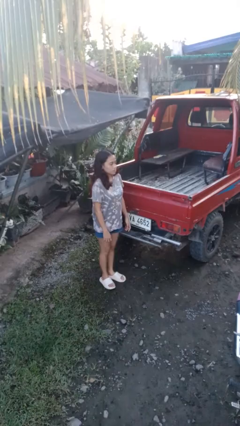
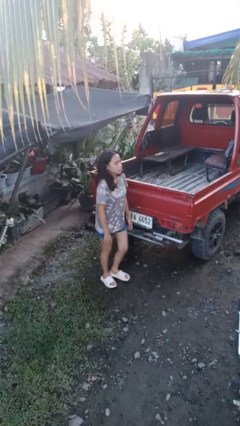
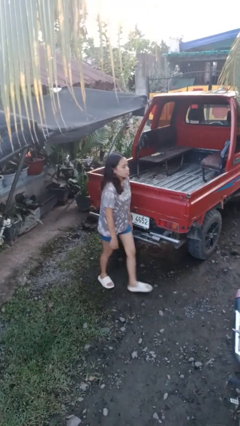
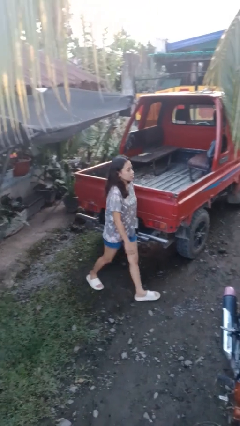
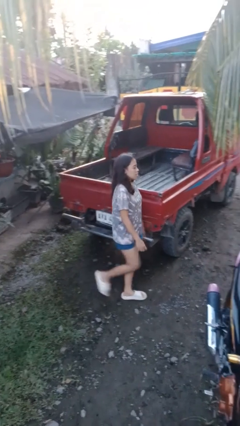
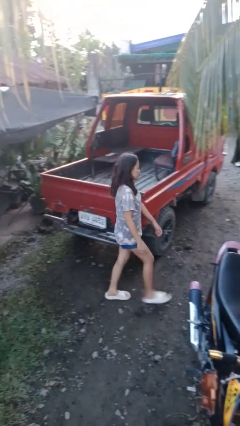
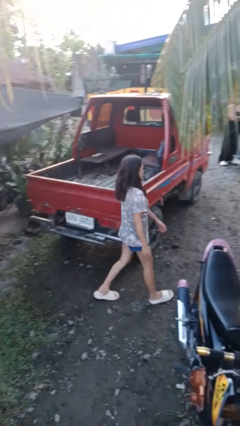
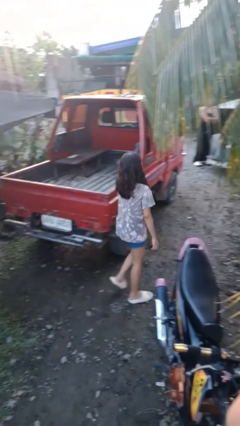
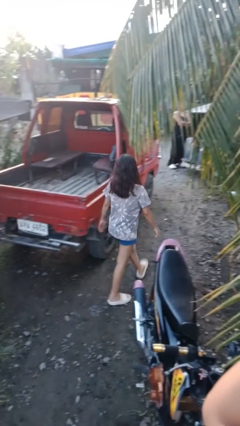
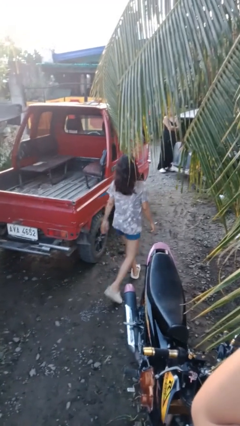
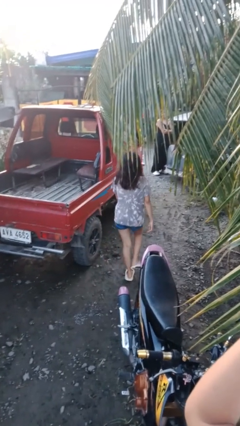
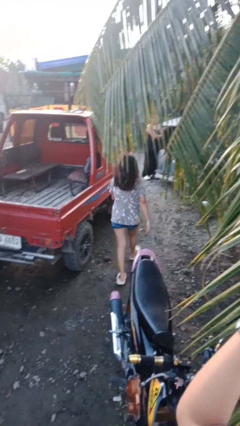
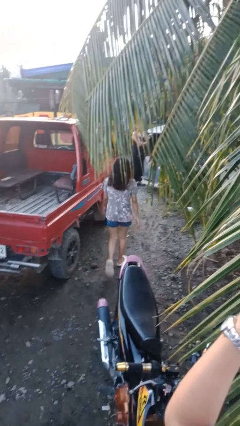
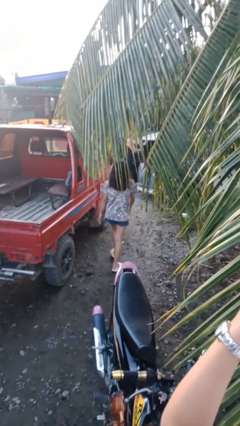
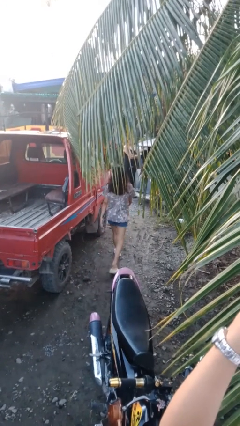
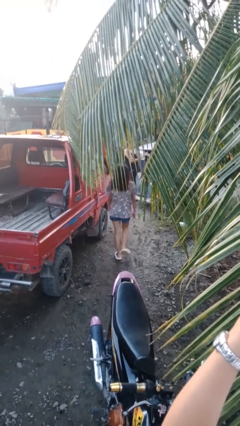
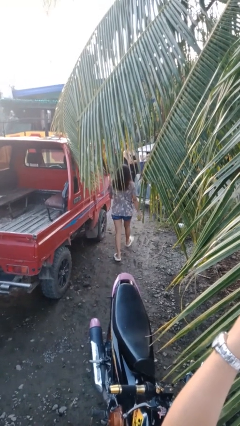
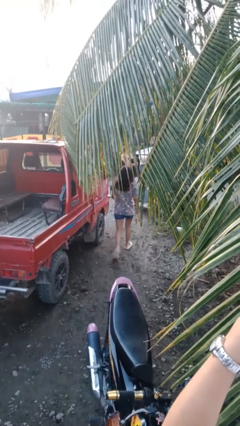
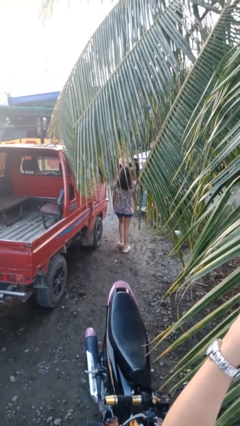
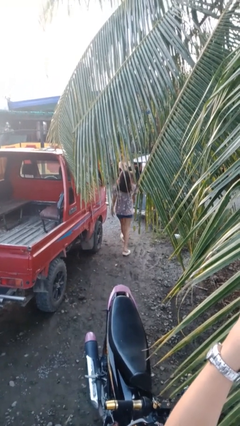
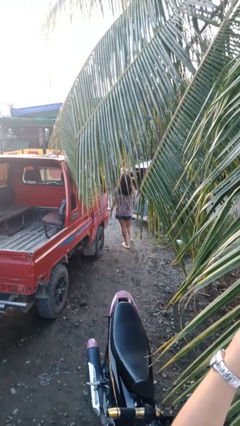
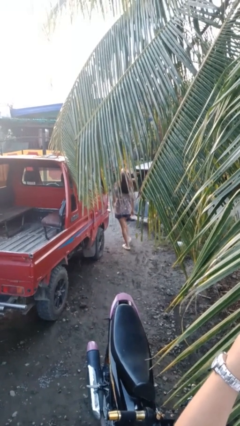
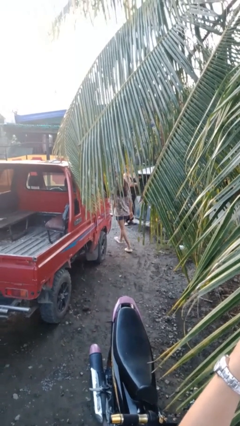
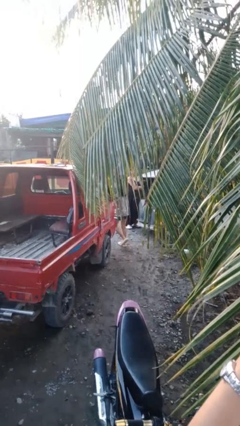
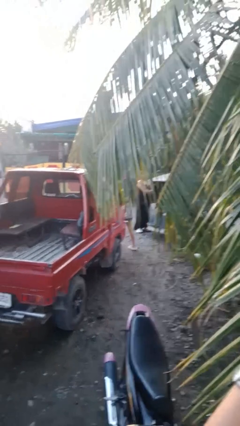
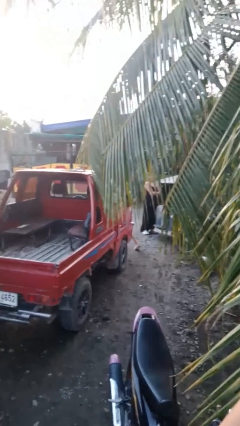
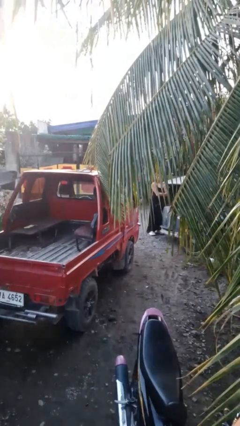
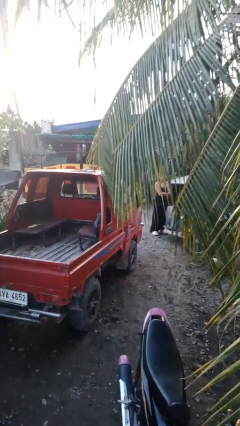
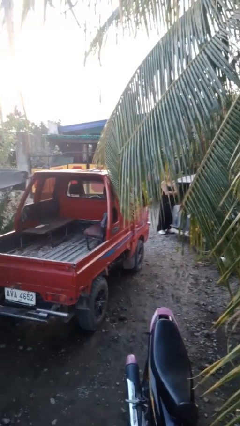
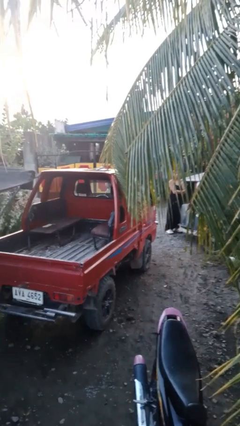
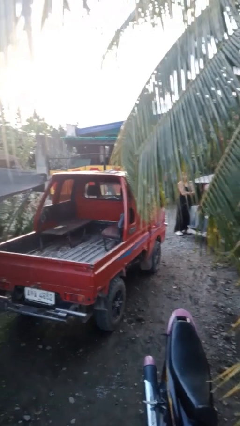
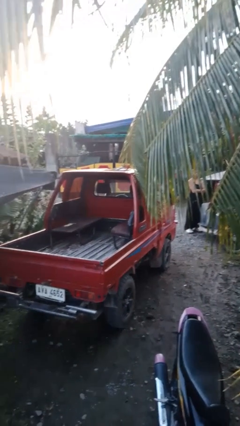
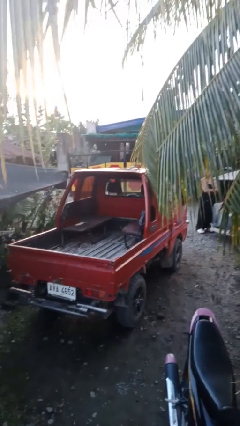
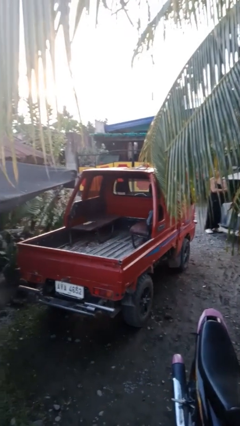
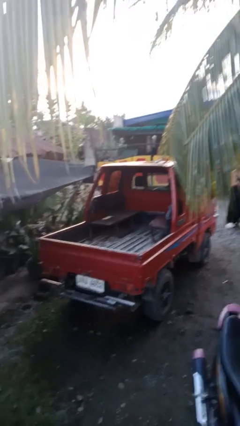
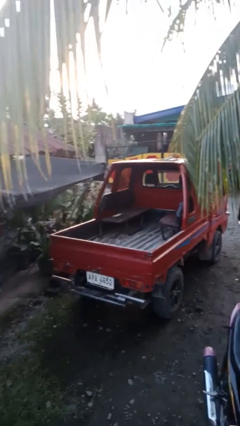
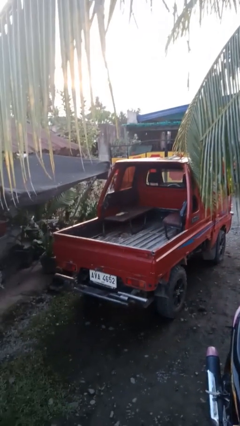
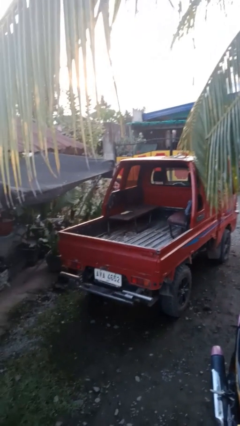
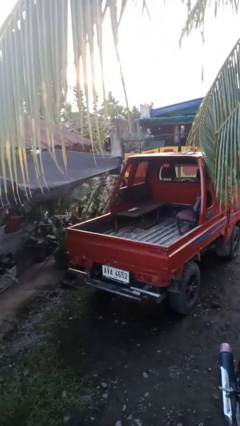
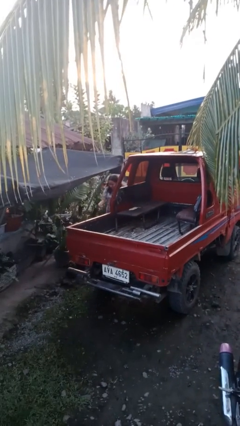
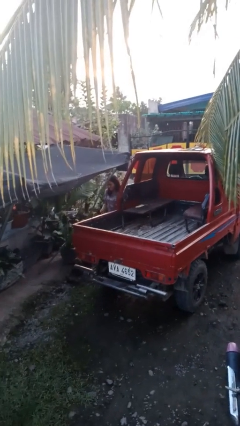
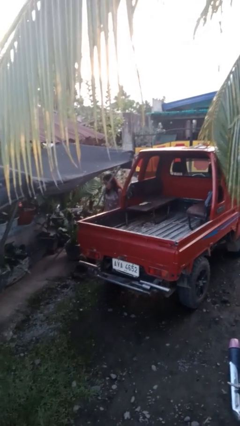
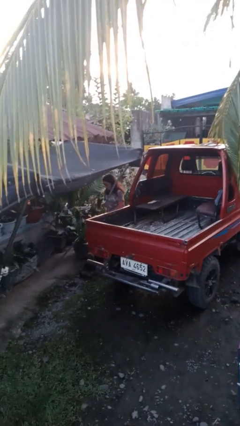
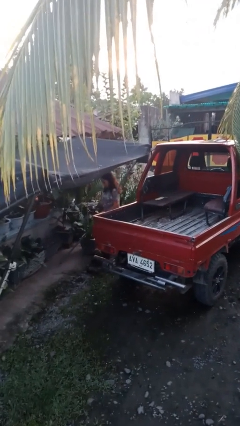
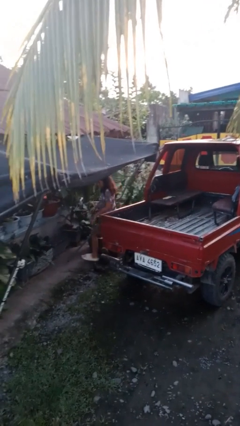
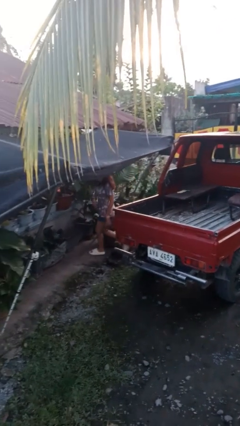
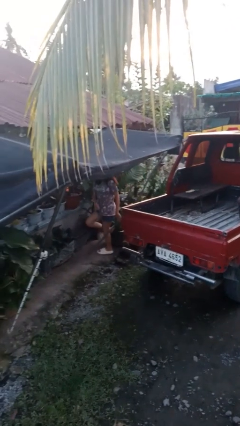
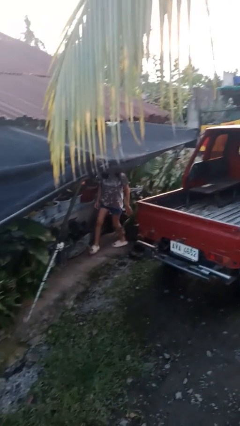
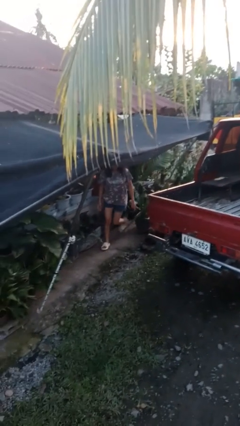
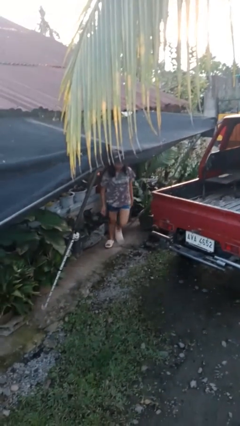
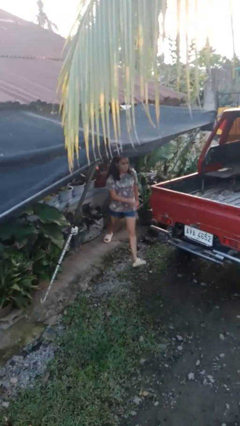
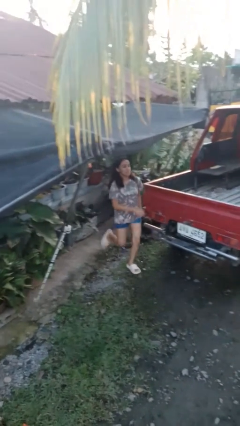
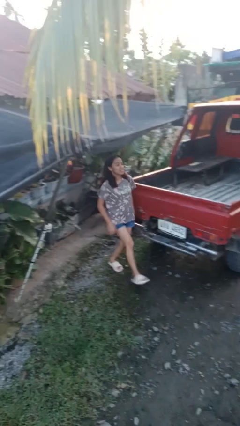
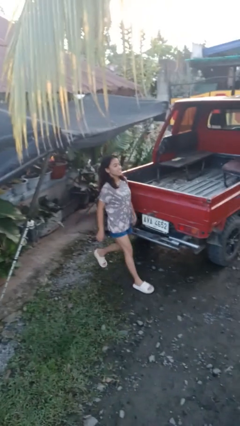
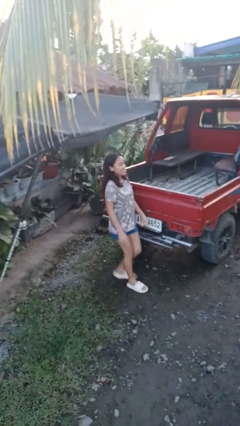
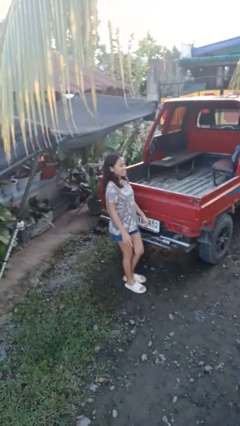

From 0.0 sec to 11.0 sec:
person walks around car

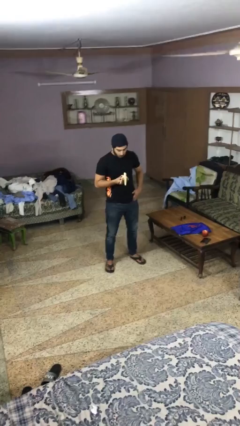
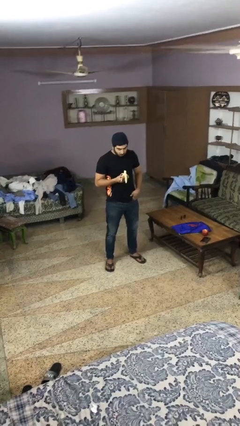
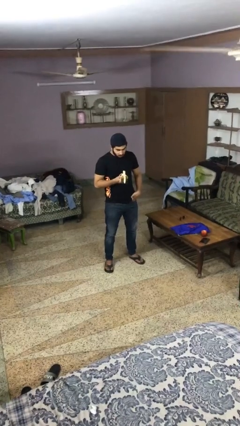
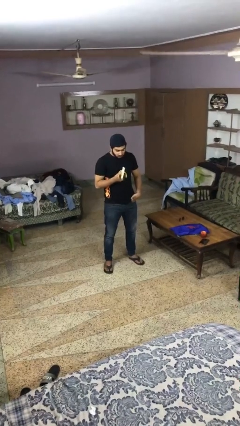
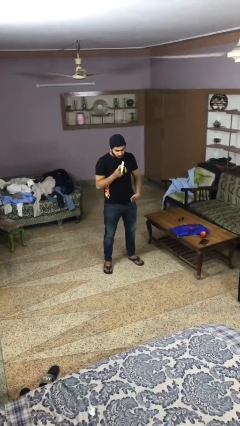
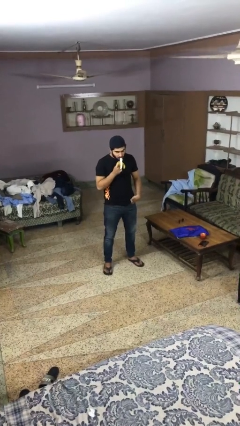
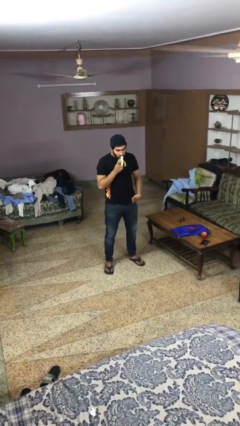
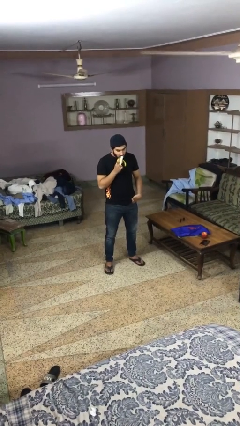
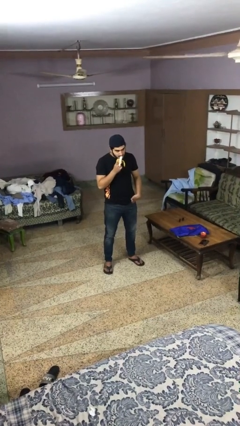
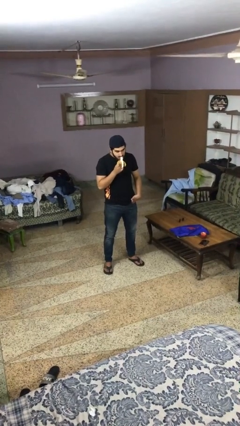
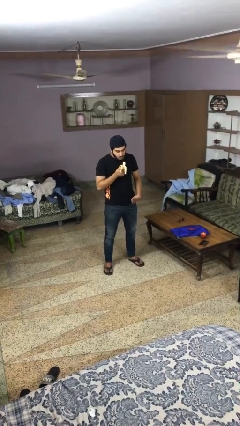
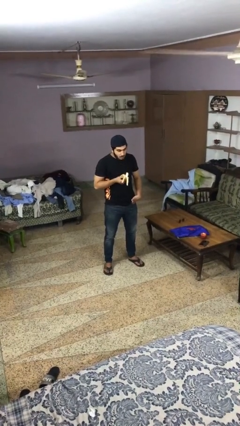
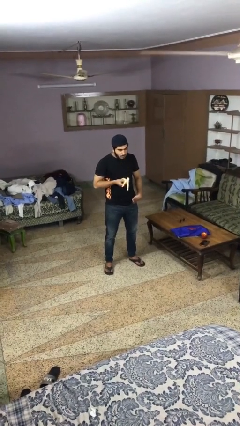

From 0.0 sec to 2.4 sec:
person eats banana

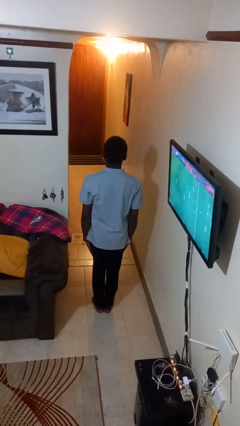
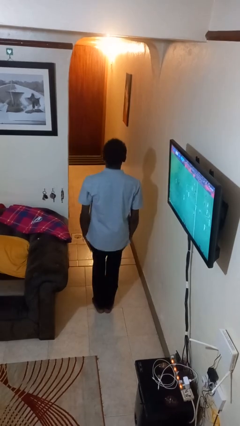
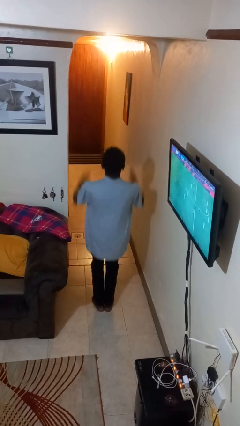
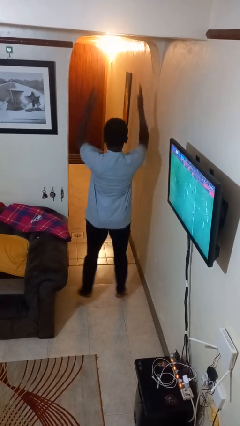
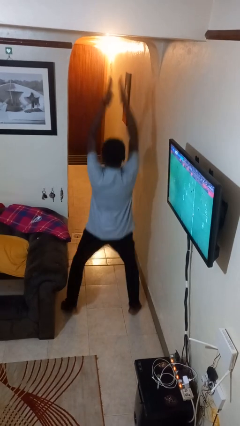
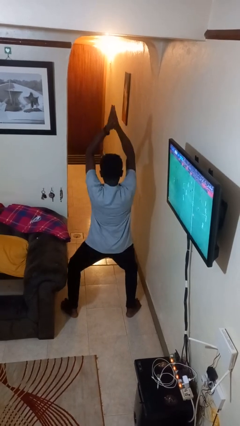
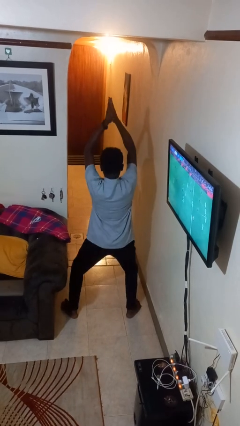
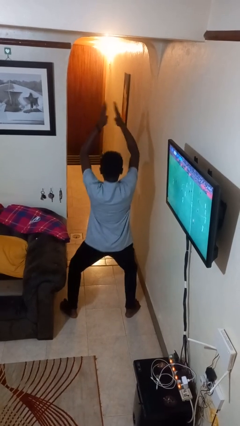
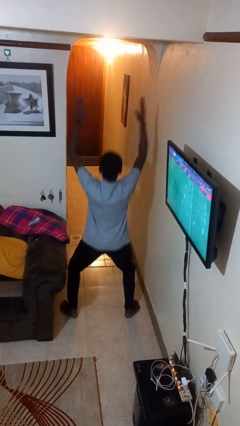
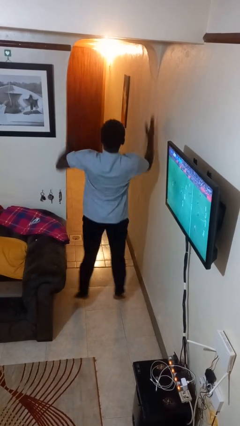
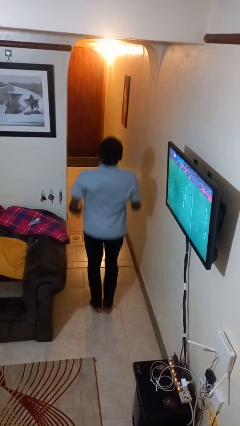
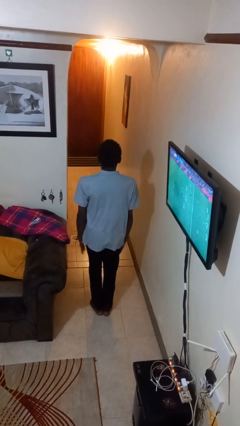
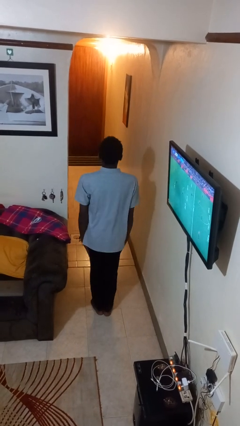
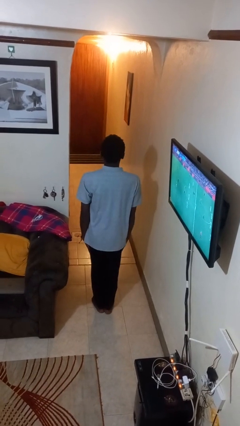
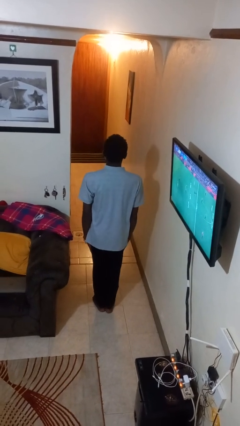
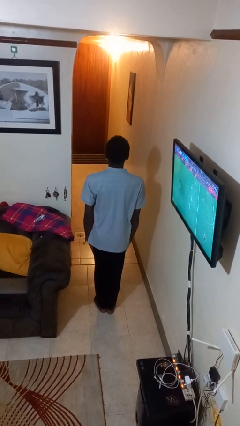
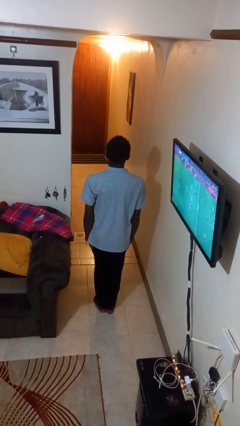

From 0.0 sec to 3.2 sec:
person exercises with jumping jacks

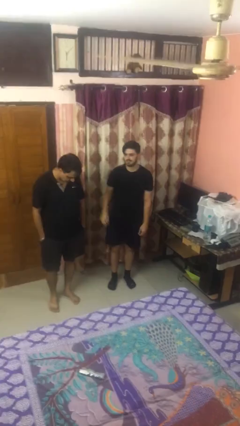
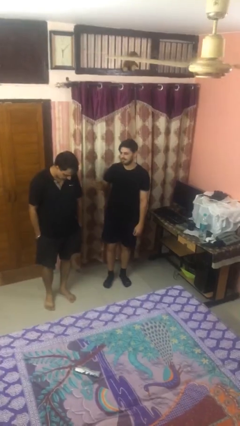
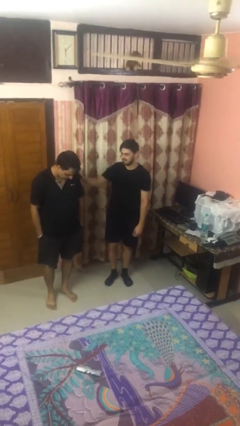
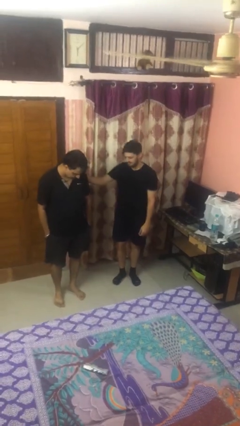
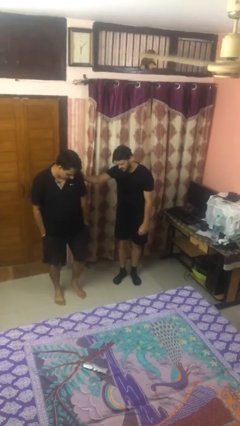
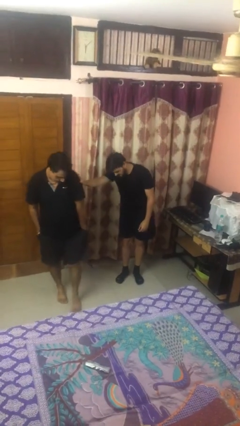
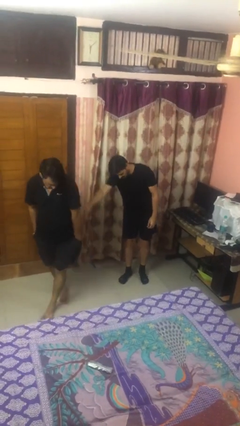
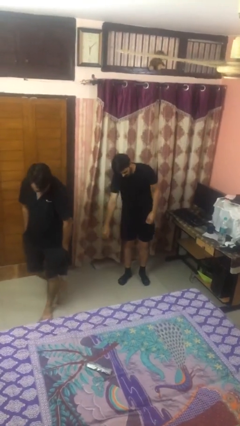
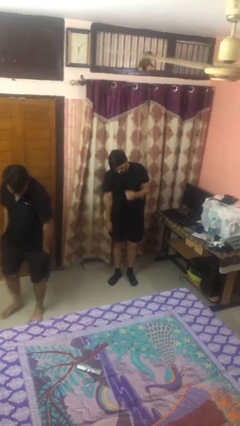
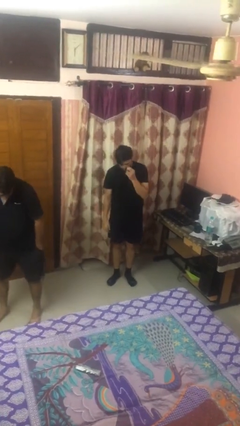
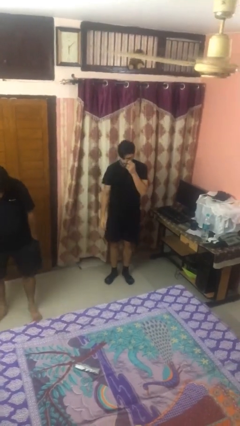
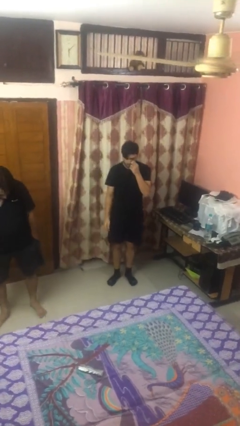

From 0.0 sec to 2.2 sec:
person shoves person
